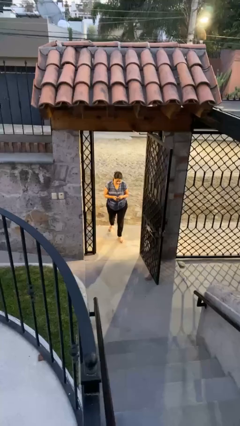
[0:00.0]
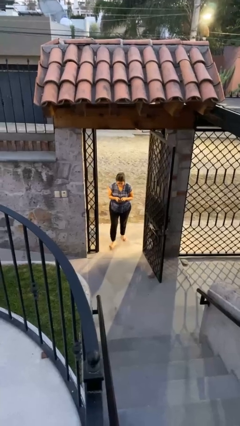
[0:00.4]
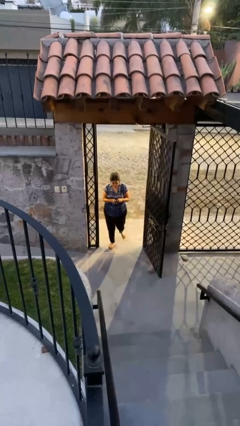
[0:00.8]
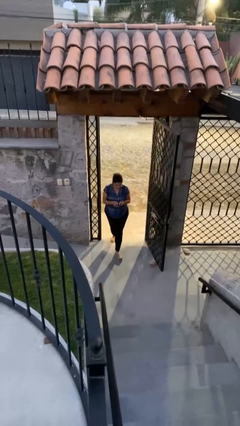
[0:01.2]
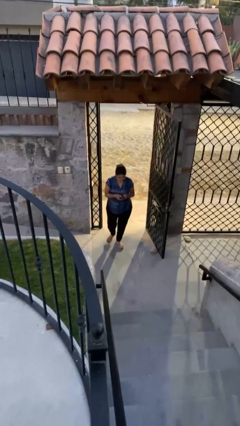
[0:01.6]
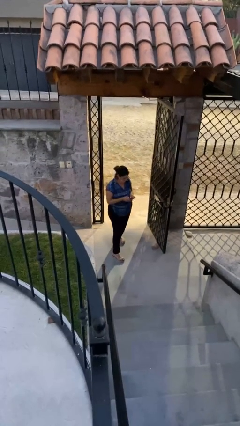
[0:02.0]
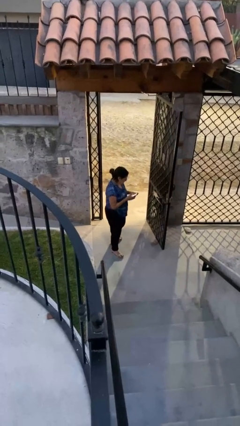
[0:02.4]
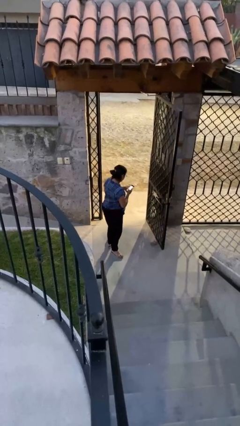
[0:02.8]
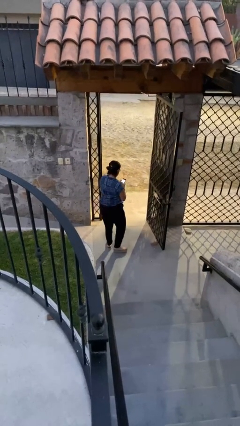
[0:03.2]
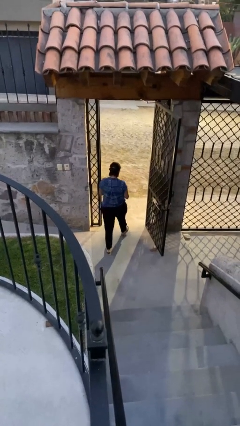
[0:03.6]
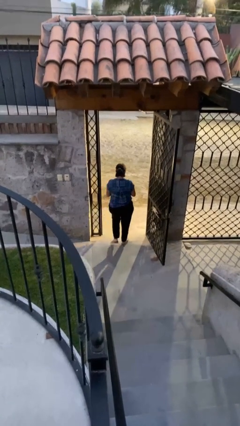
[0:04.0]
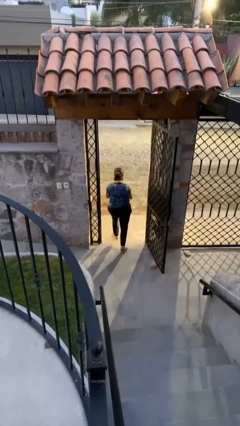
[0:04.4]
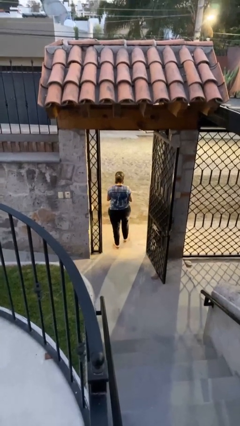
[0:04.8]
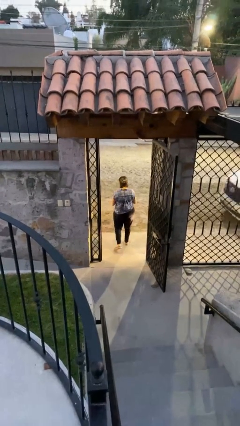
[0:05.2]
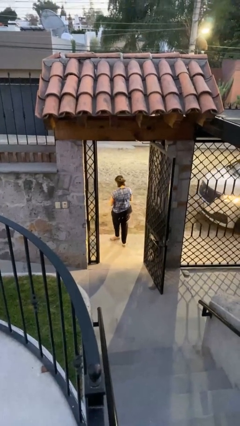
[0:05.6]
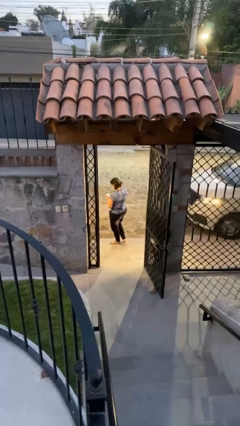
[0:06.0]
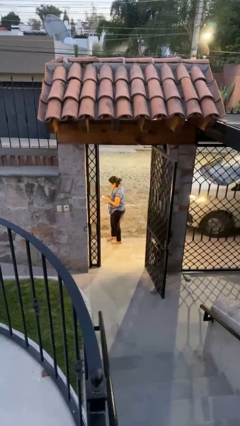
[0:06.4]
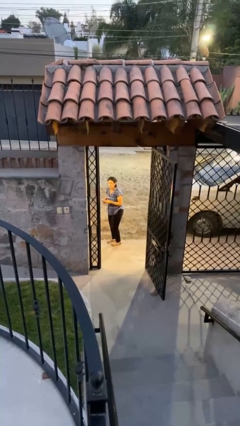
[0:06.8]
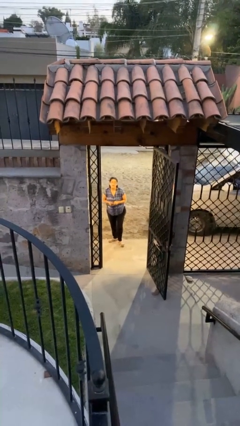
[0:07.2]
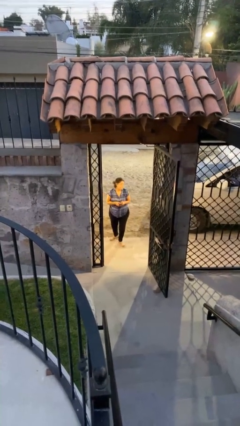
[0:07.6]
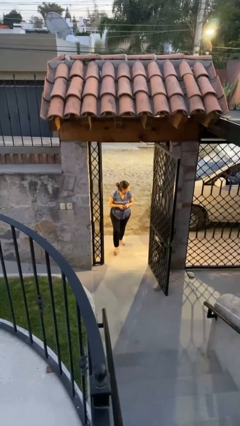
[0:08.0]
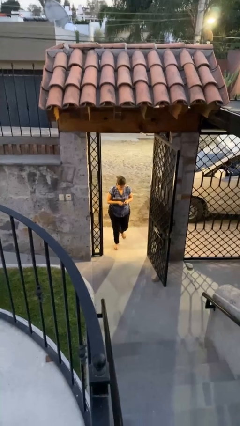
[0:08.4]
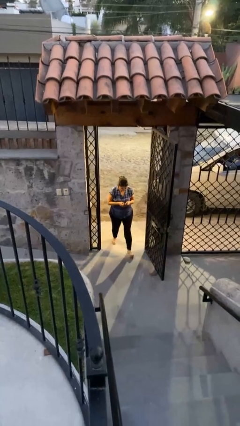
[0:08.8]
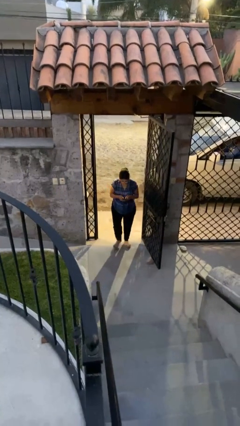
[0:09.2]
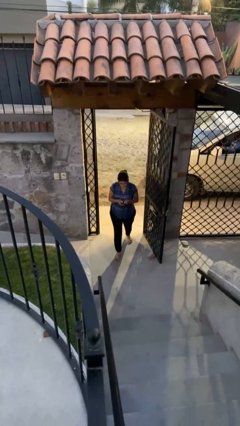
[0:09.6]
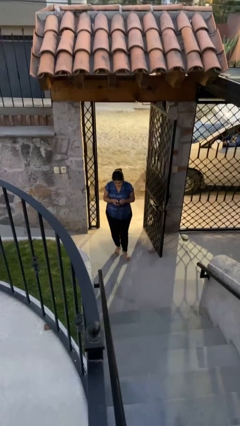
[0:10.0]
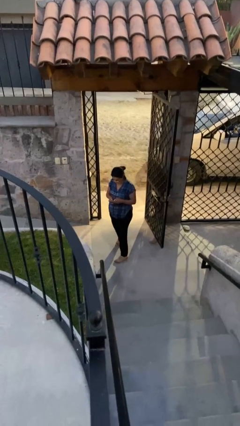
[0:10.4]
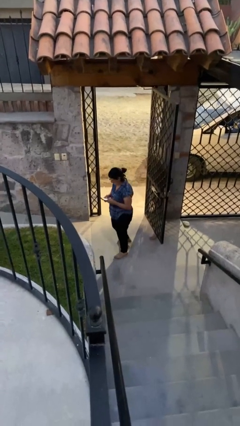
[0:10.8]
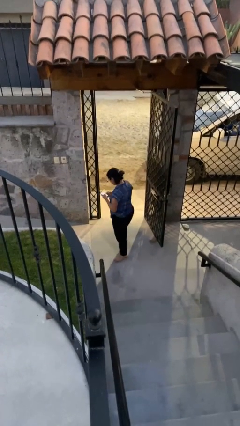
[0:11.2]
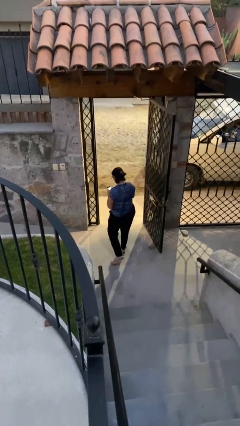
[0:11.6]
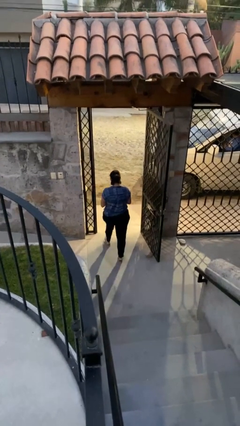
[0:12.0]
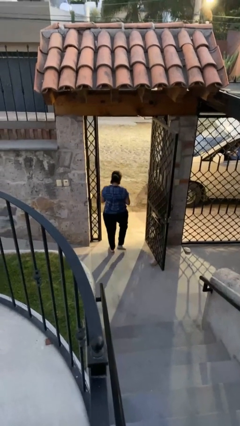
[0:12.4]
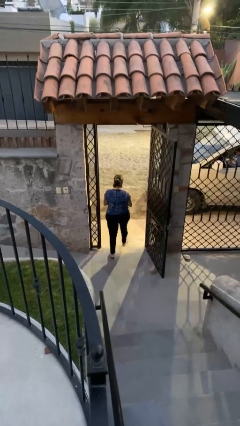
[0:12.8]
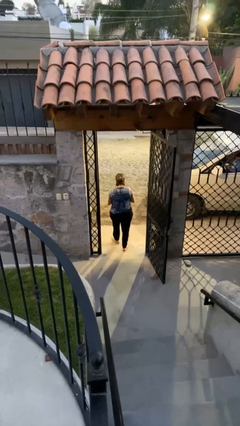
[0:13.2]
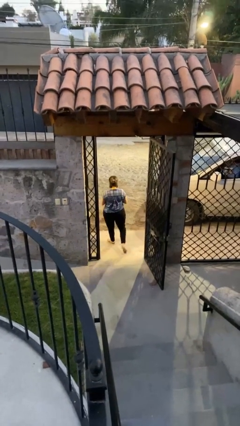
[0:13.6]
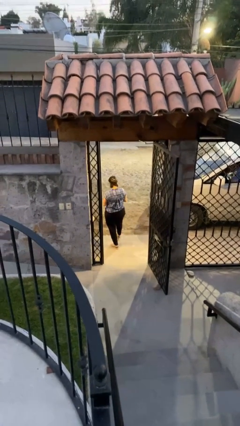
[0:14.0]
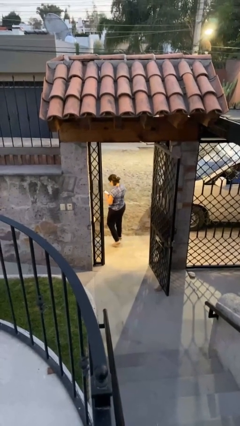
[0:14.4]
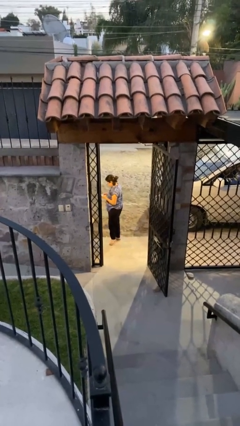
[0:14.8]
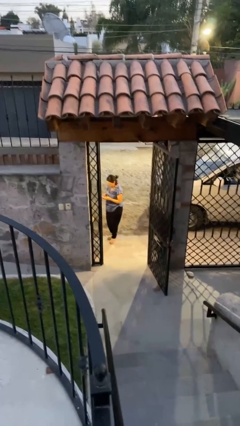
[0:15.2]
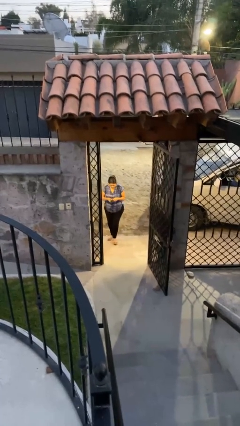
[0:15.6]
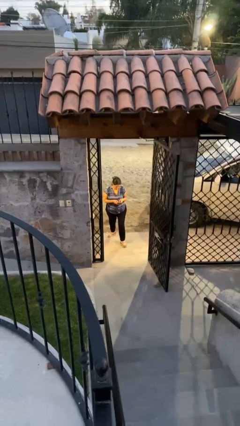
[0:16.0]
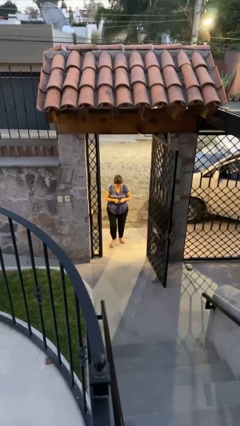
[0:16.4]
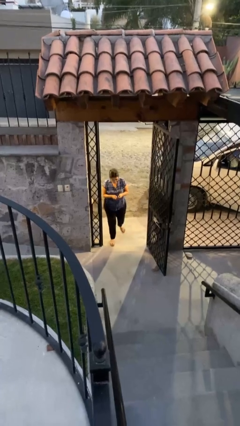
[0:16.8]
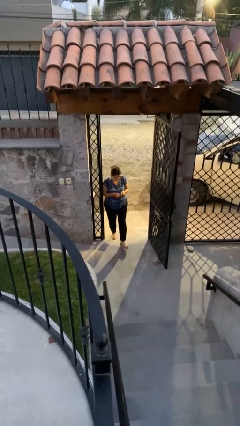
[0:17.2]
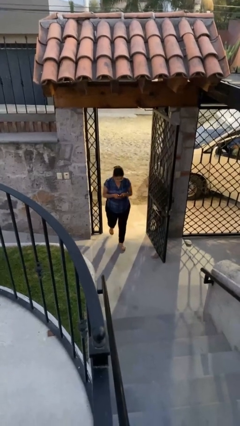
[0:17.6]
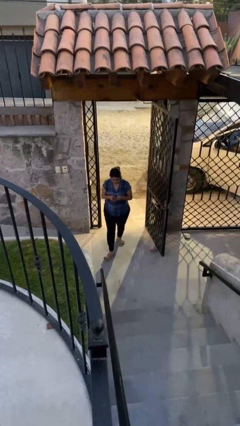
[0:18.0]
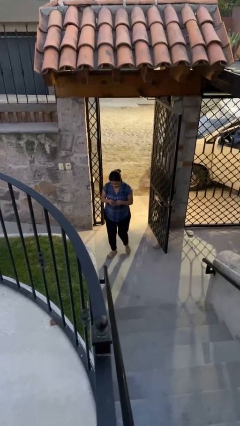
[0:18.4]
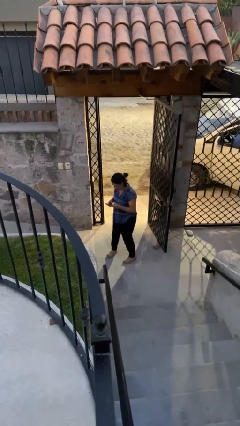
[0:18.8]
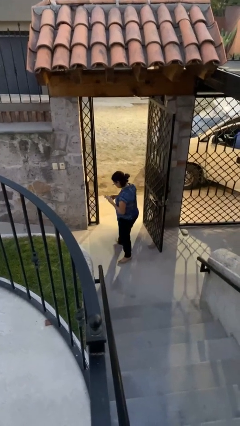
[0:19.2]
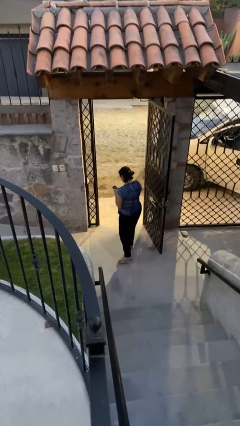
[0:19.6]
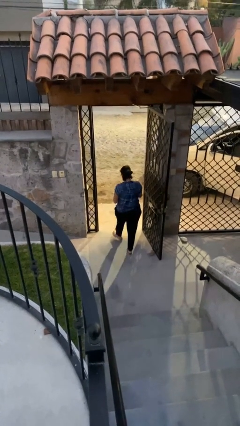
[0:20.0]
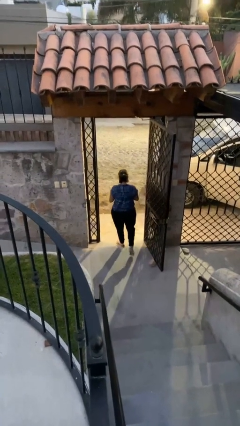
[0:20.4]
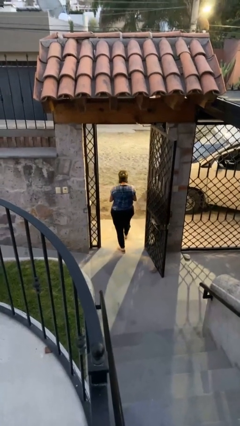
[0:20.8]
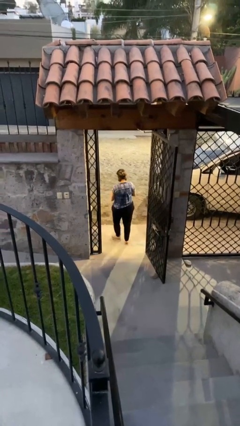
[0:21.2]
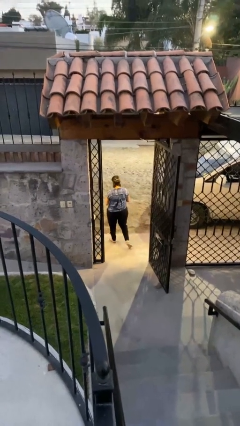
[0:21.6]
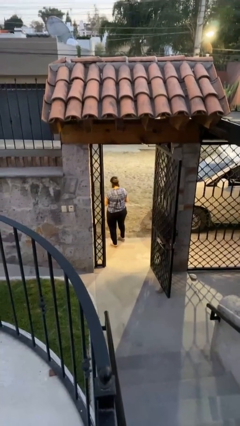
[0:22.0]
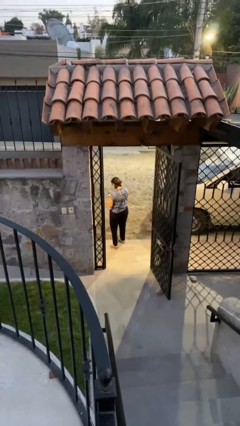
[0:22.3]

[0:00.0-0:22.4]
person texts on phone

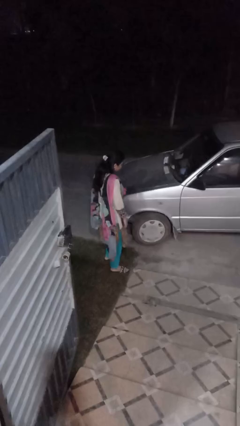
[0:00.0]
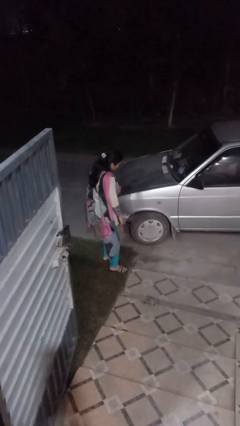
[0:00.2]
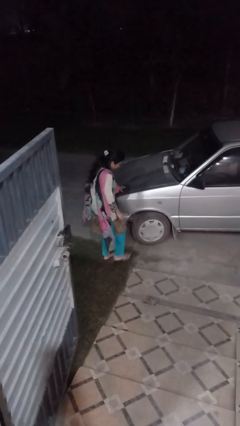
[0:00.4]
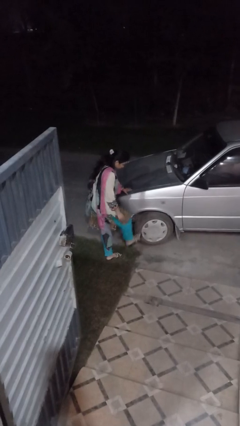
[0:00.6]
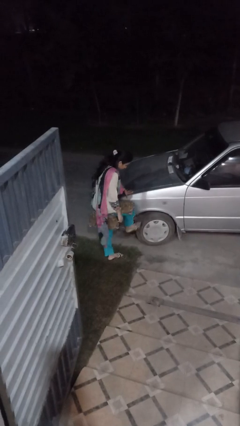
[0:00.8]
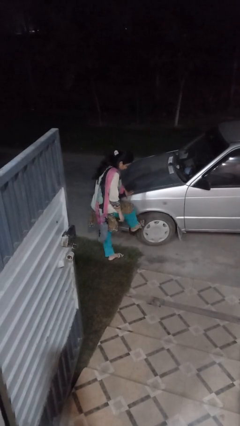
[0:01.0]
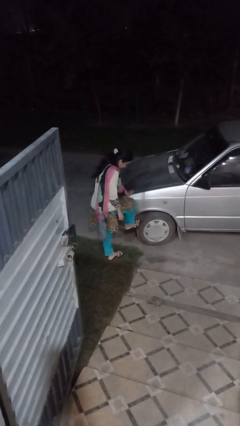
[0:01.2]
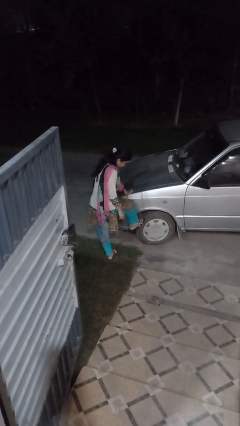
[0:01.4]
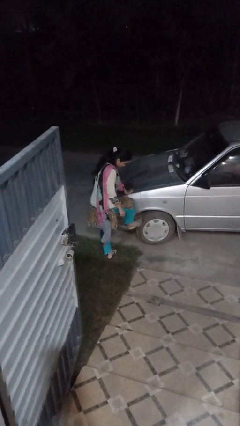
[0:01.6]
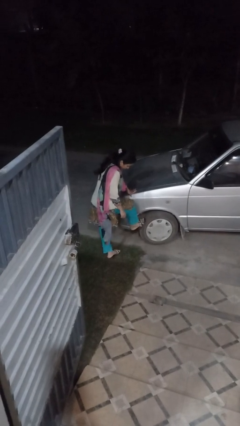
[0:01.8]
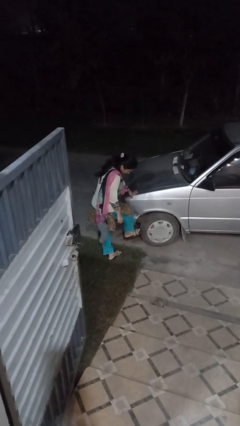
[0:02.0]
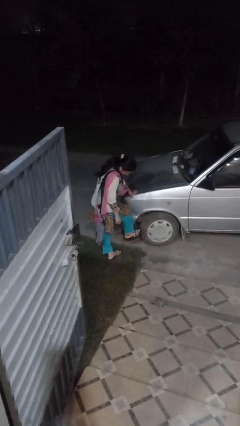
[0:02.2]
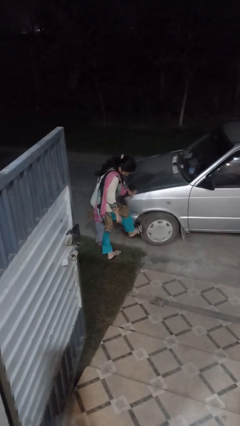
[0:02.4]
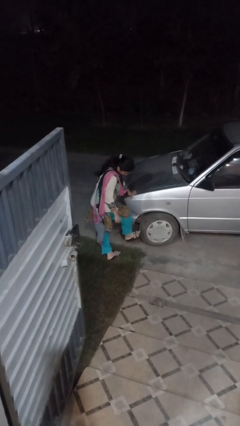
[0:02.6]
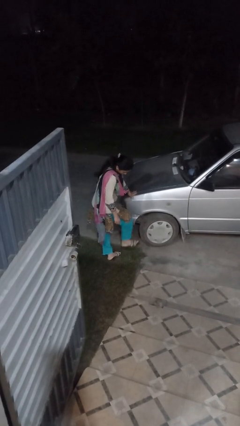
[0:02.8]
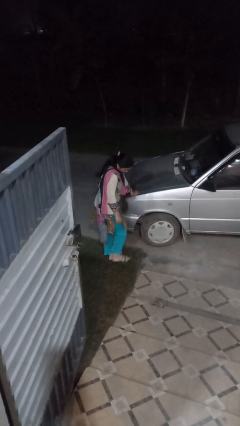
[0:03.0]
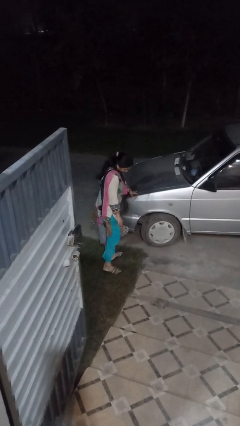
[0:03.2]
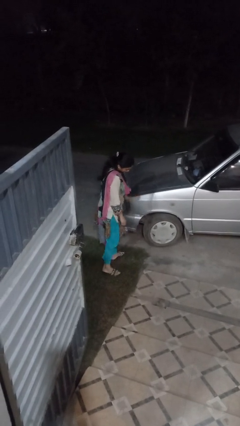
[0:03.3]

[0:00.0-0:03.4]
person kicks car tires

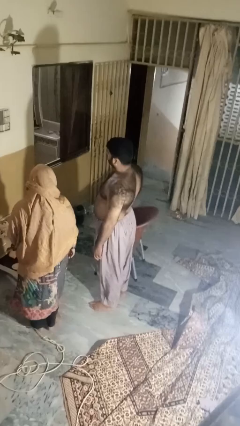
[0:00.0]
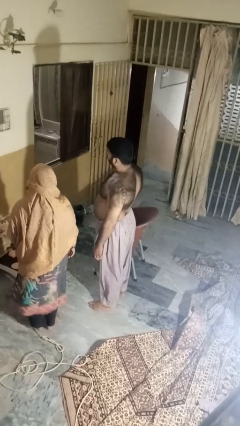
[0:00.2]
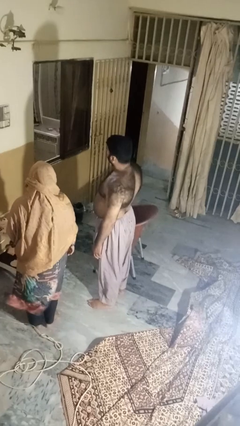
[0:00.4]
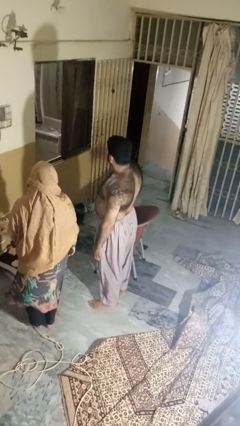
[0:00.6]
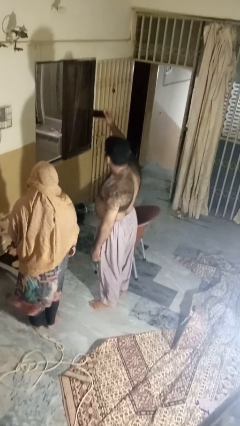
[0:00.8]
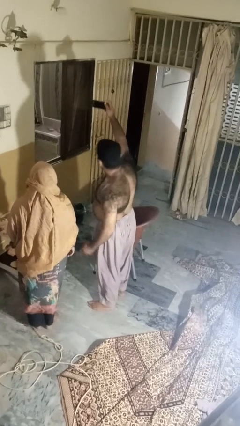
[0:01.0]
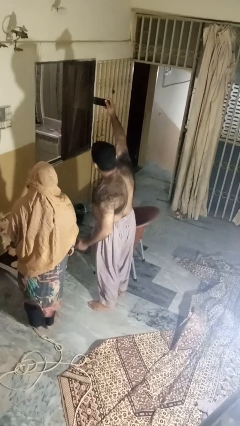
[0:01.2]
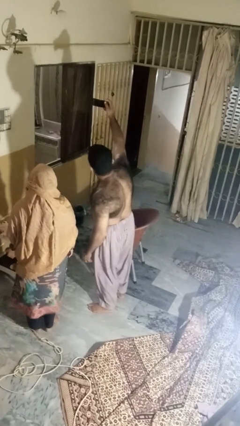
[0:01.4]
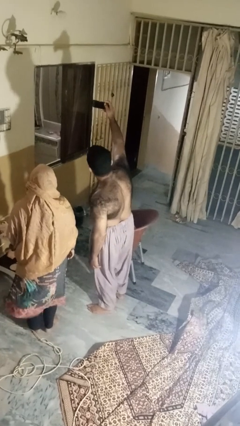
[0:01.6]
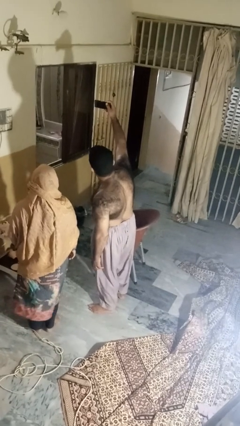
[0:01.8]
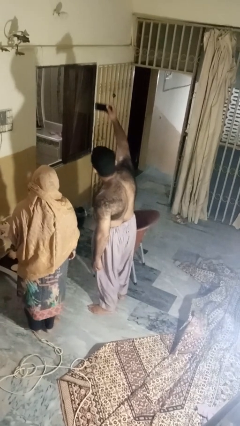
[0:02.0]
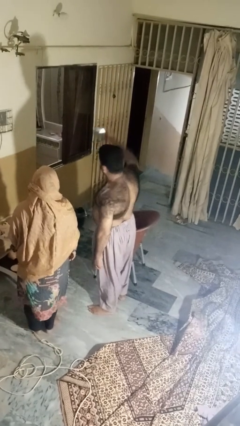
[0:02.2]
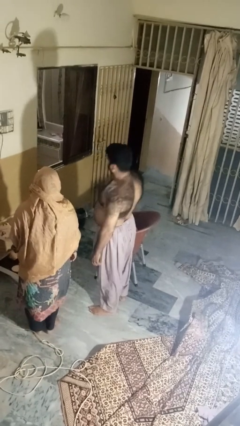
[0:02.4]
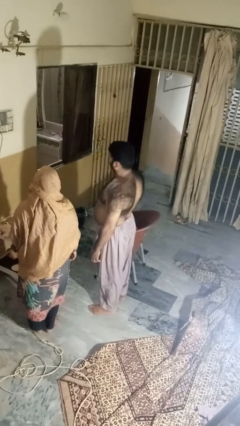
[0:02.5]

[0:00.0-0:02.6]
person takes selfie with person

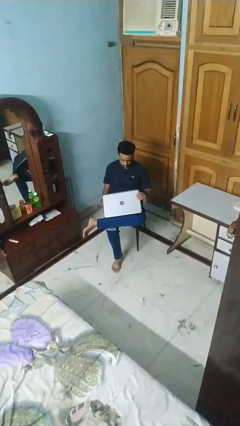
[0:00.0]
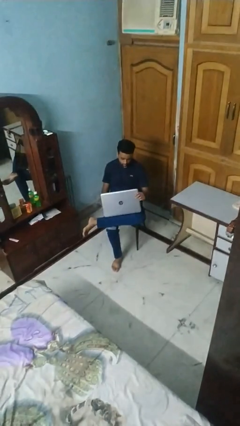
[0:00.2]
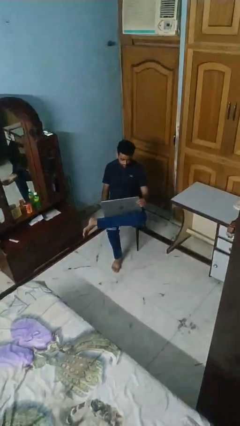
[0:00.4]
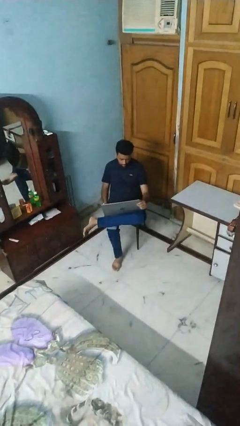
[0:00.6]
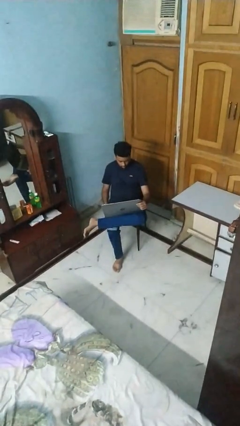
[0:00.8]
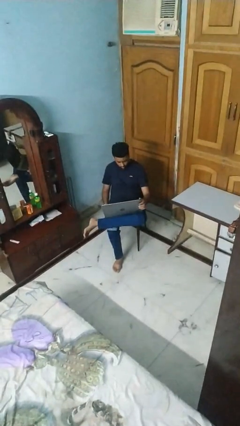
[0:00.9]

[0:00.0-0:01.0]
person opens laptop
